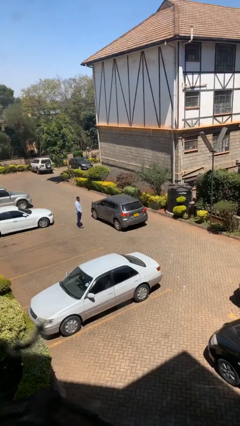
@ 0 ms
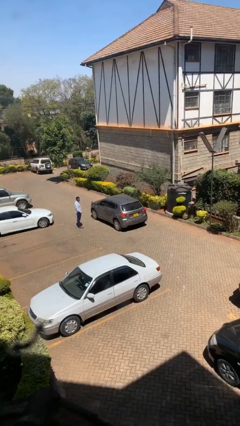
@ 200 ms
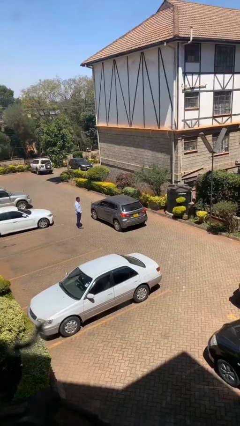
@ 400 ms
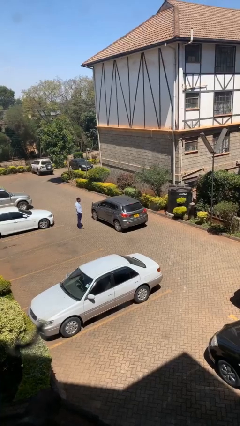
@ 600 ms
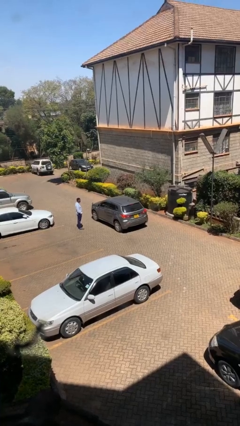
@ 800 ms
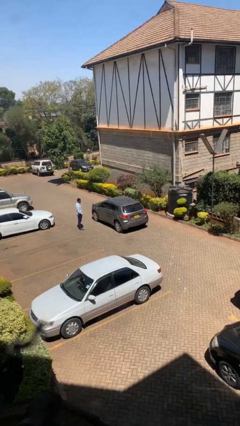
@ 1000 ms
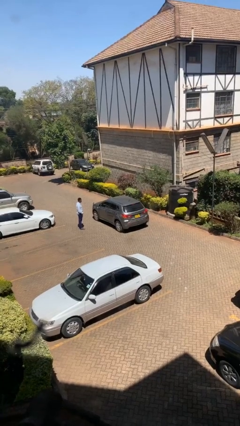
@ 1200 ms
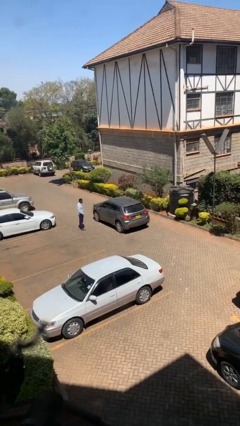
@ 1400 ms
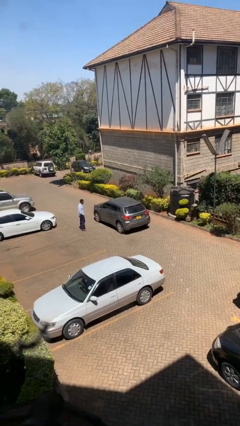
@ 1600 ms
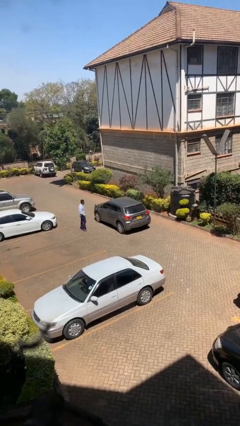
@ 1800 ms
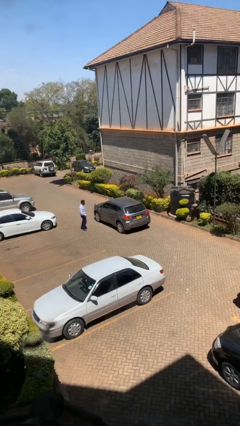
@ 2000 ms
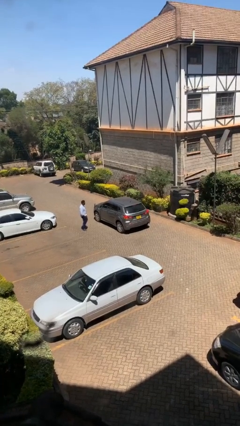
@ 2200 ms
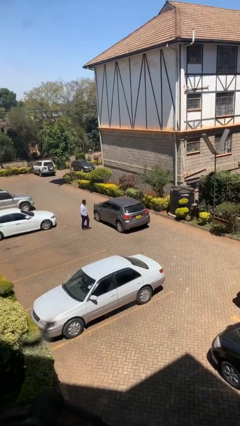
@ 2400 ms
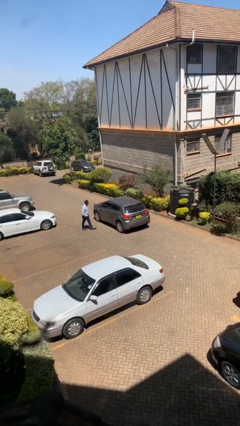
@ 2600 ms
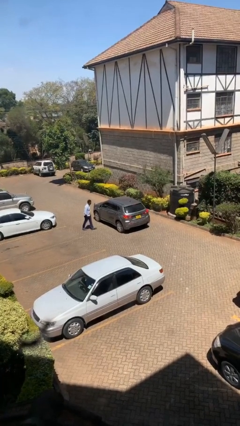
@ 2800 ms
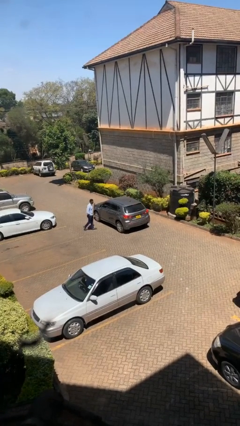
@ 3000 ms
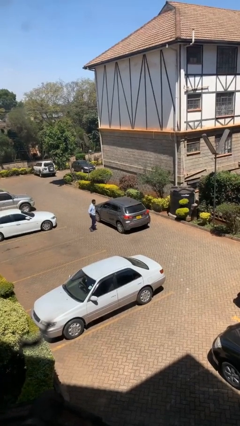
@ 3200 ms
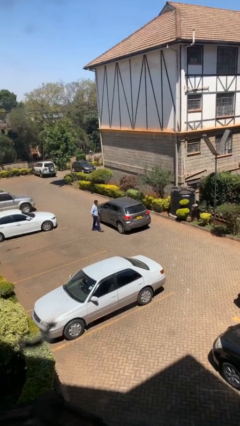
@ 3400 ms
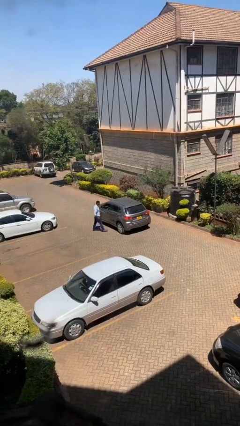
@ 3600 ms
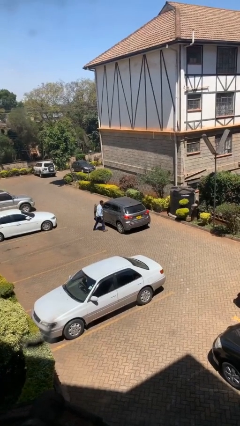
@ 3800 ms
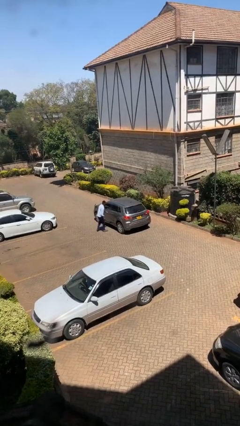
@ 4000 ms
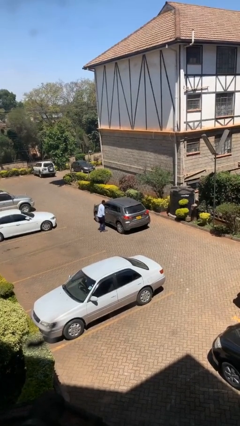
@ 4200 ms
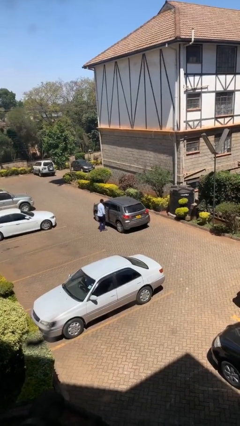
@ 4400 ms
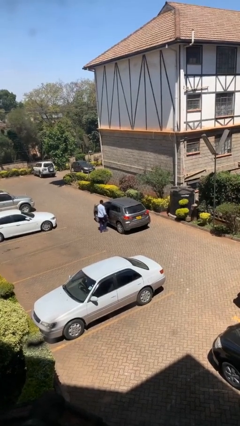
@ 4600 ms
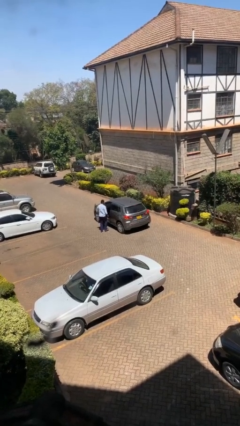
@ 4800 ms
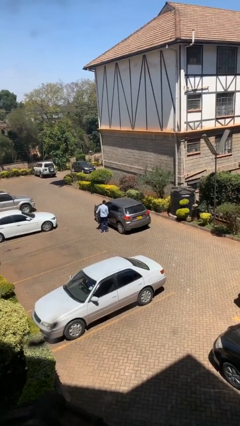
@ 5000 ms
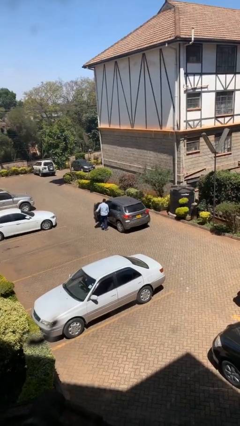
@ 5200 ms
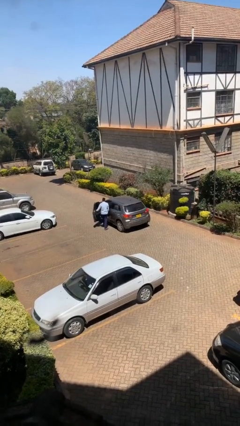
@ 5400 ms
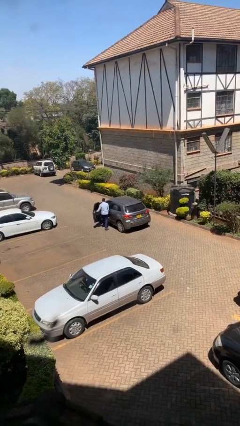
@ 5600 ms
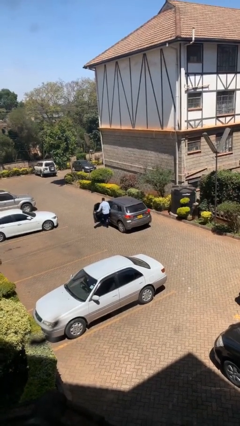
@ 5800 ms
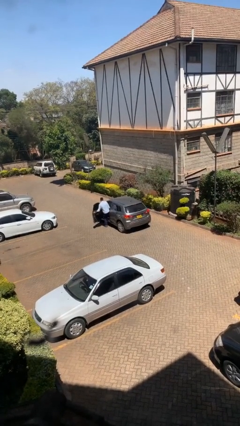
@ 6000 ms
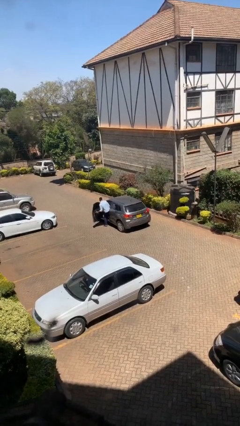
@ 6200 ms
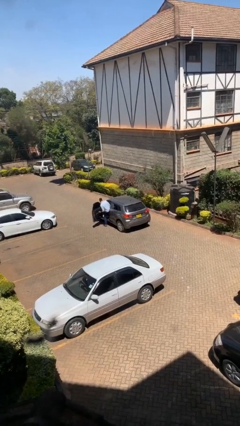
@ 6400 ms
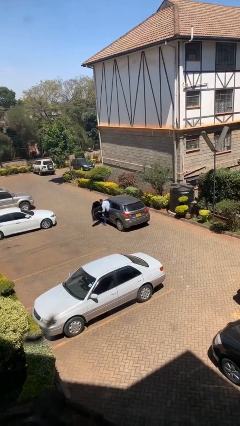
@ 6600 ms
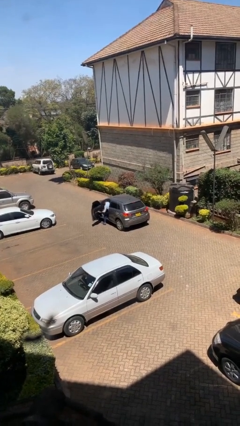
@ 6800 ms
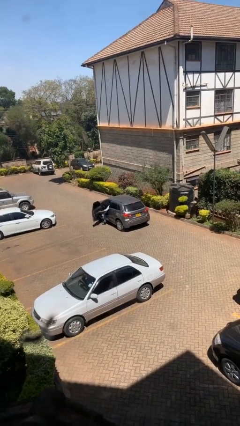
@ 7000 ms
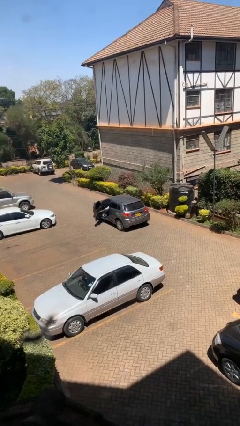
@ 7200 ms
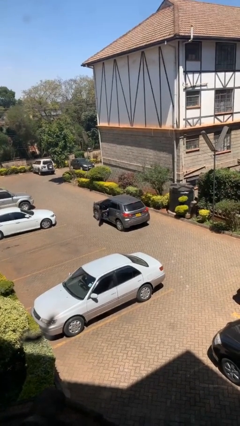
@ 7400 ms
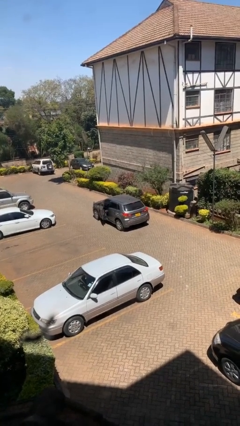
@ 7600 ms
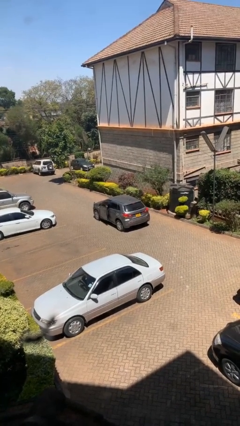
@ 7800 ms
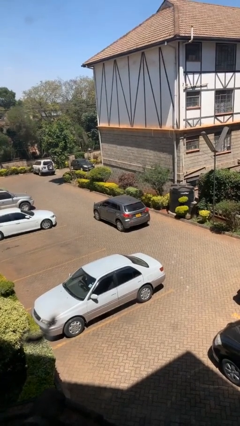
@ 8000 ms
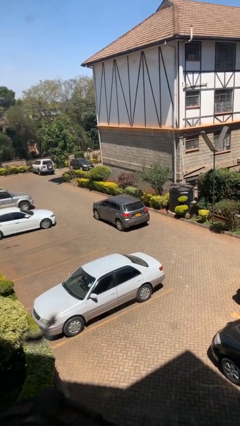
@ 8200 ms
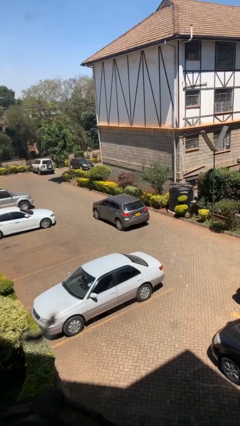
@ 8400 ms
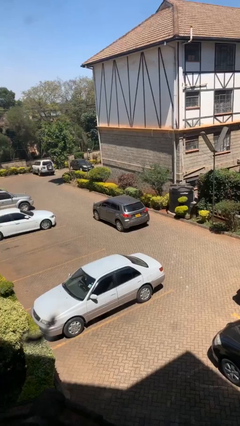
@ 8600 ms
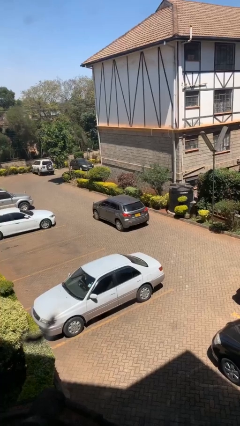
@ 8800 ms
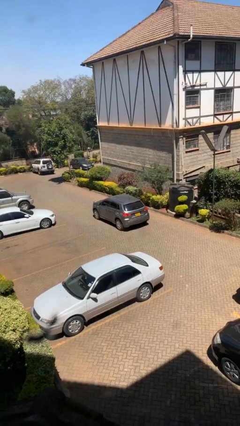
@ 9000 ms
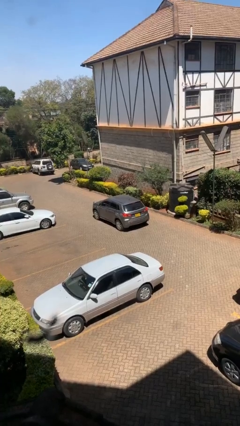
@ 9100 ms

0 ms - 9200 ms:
car picks up person

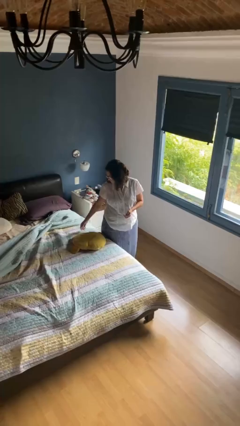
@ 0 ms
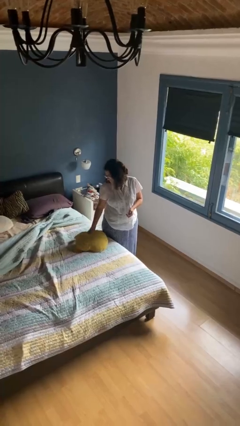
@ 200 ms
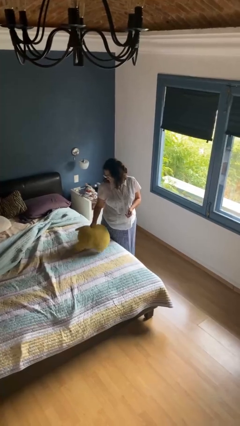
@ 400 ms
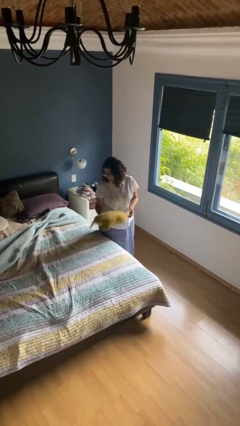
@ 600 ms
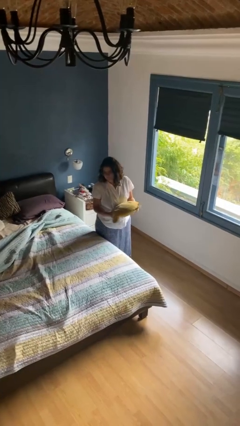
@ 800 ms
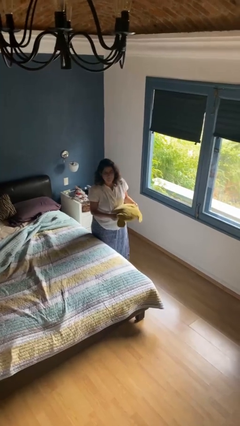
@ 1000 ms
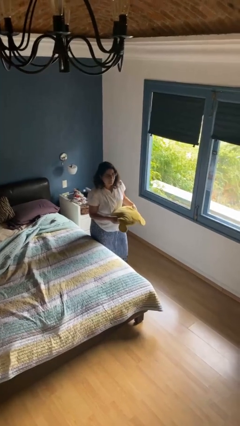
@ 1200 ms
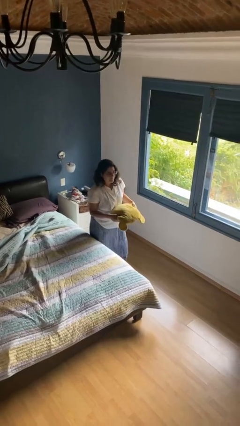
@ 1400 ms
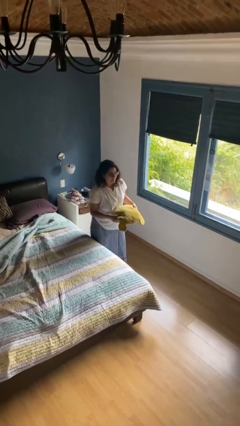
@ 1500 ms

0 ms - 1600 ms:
person picks up object from bed

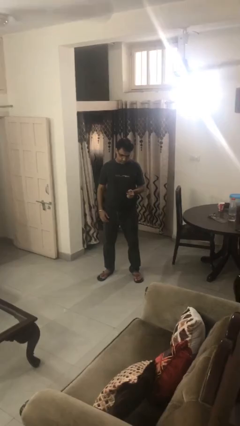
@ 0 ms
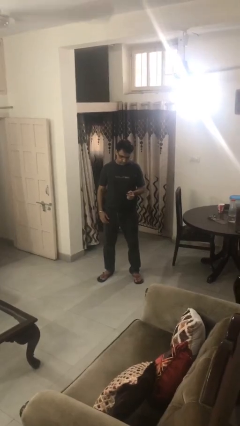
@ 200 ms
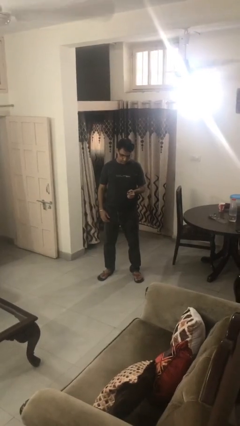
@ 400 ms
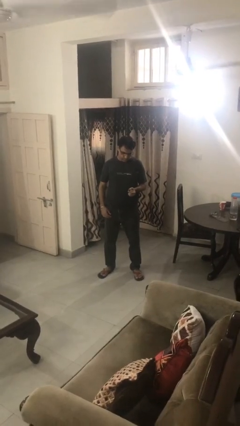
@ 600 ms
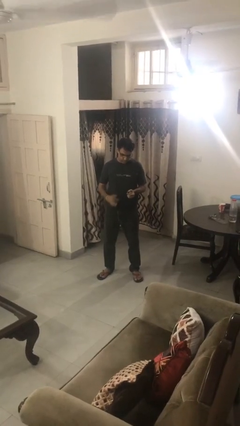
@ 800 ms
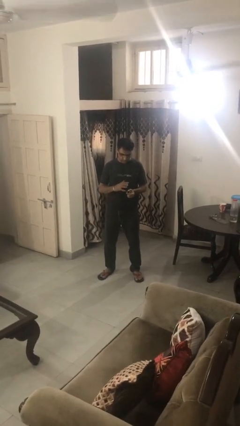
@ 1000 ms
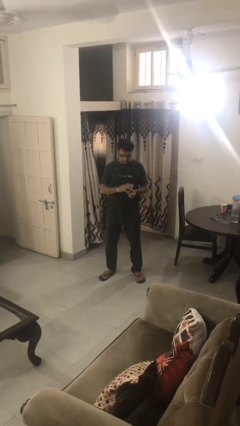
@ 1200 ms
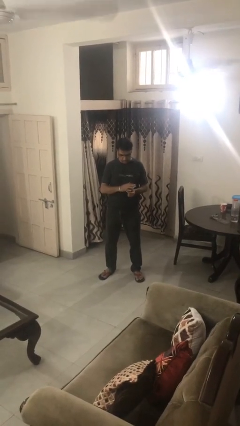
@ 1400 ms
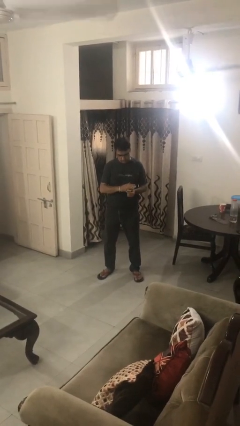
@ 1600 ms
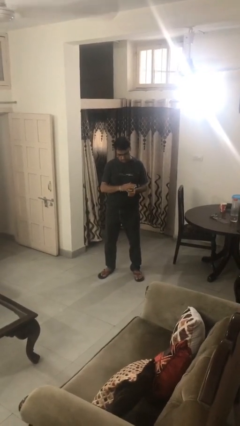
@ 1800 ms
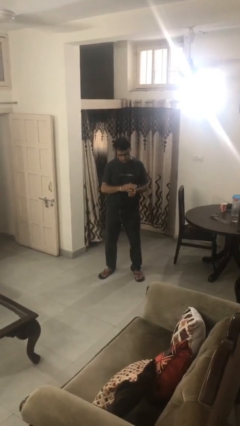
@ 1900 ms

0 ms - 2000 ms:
person puts on ring

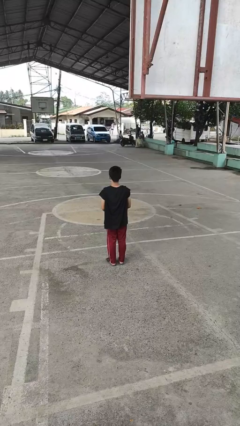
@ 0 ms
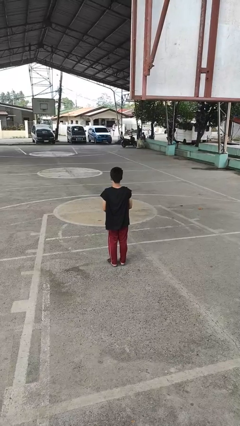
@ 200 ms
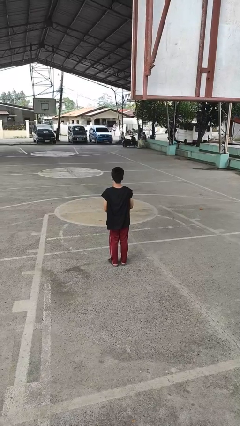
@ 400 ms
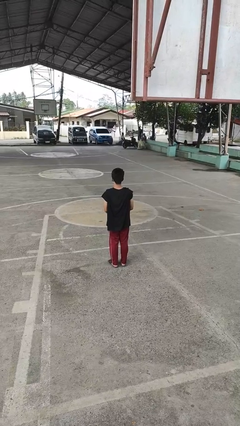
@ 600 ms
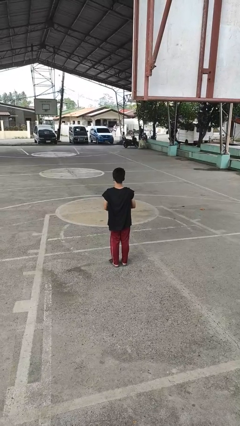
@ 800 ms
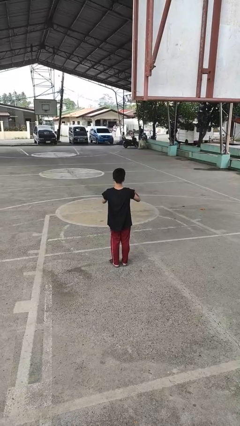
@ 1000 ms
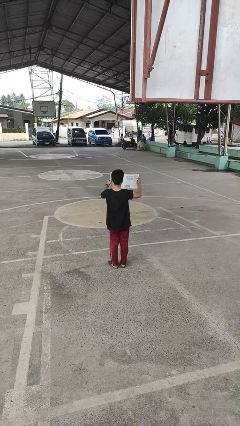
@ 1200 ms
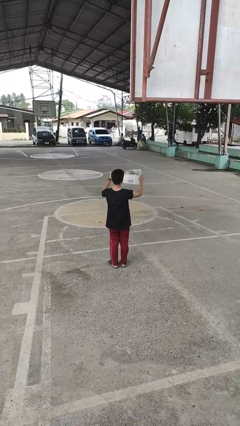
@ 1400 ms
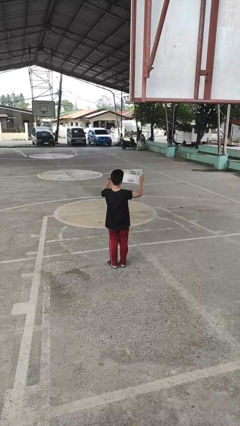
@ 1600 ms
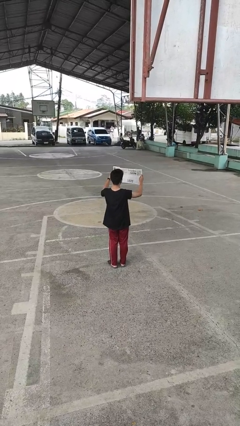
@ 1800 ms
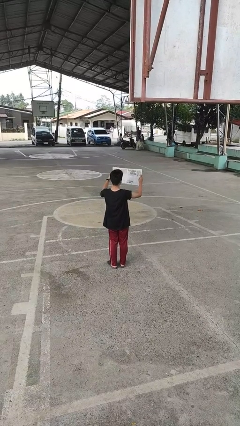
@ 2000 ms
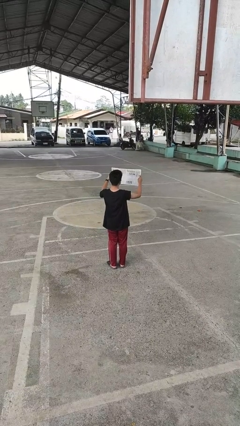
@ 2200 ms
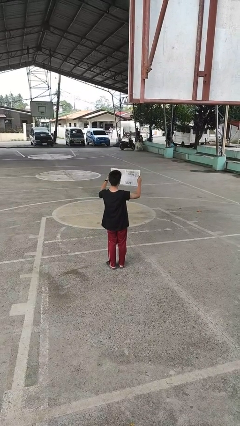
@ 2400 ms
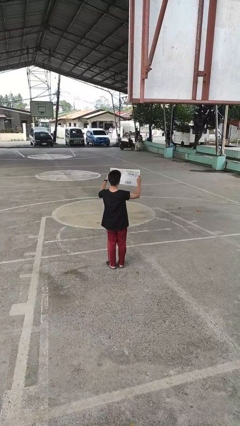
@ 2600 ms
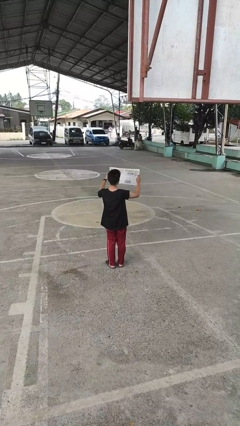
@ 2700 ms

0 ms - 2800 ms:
person reads newspaper

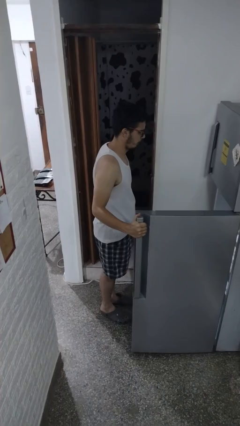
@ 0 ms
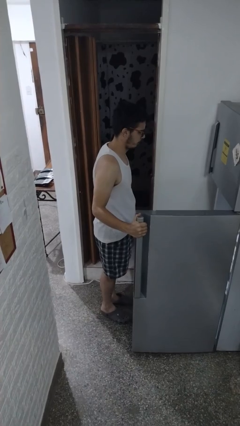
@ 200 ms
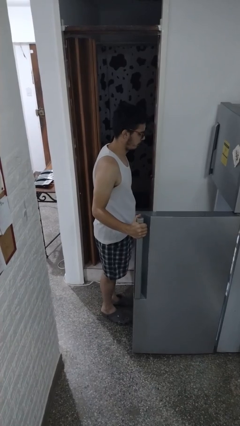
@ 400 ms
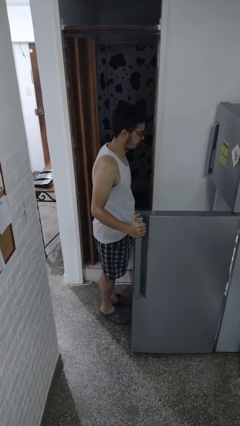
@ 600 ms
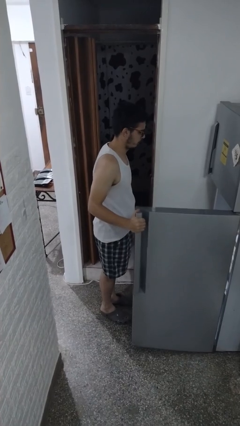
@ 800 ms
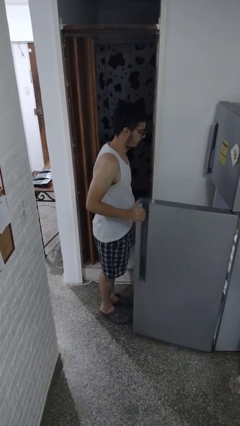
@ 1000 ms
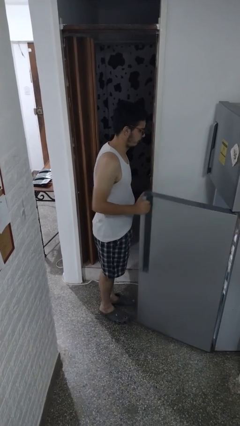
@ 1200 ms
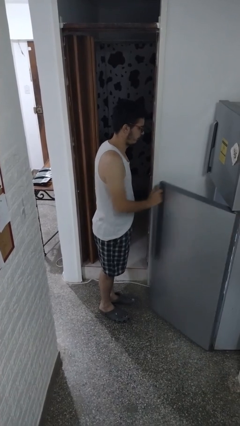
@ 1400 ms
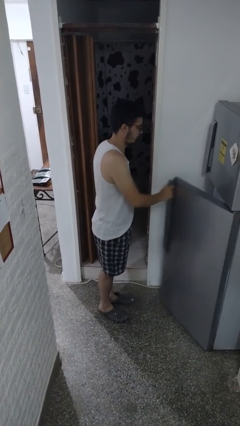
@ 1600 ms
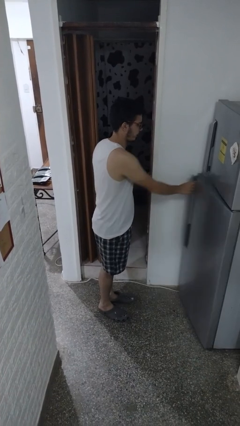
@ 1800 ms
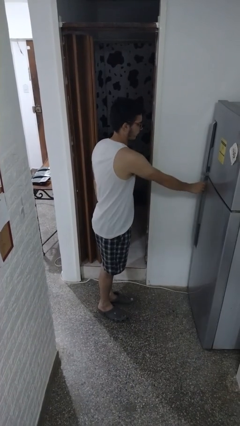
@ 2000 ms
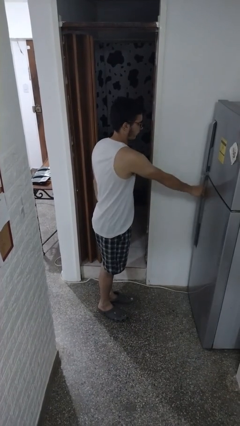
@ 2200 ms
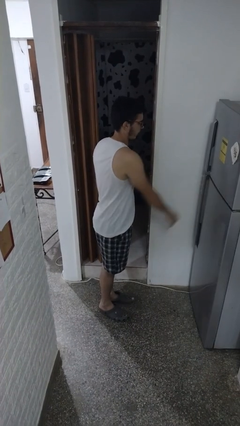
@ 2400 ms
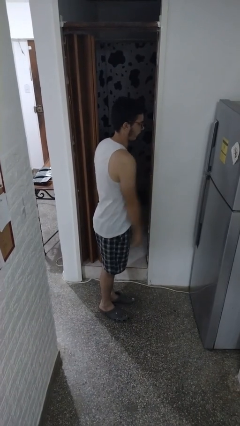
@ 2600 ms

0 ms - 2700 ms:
person closes refrigerator
